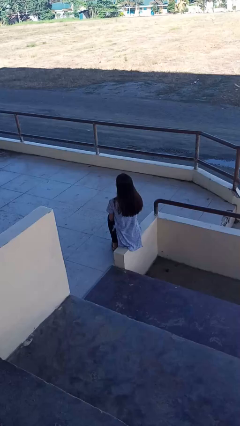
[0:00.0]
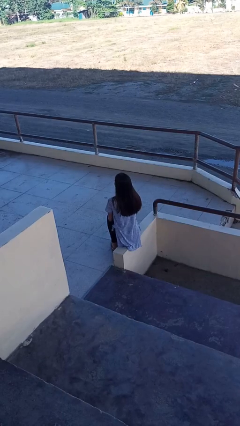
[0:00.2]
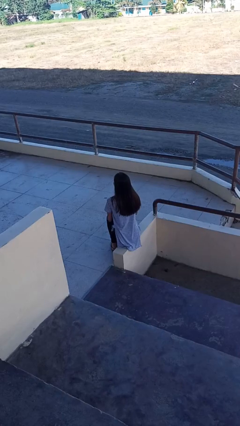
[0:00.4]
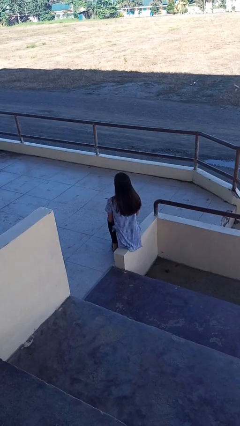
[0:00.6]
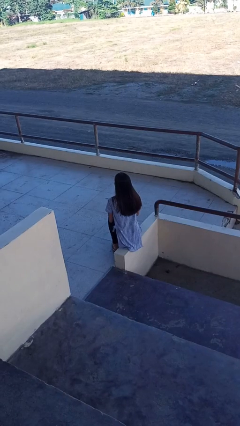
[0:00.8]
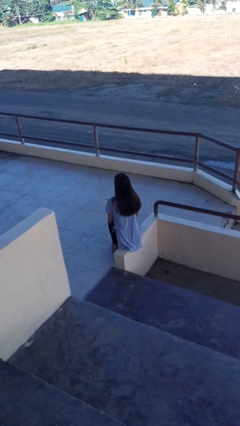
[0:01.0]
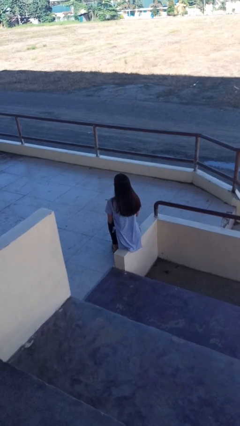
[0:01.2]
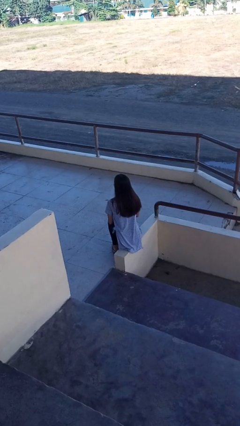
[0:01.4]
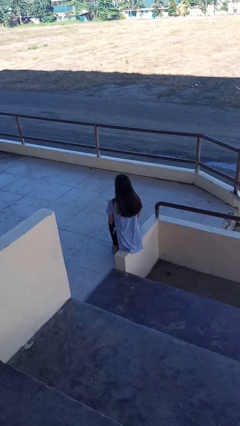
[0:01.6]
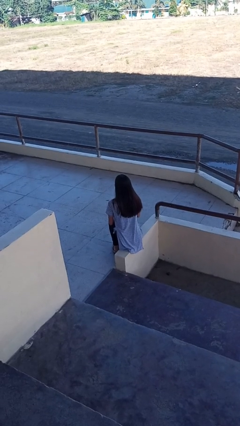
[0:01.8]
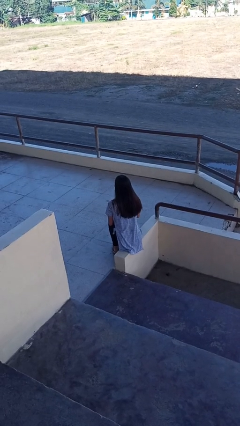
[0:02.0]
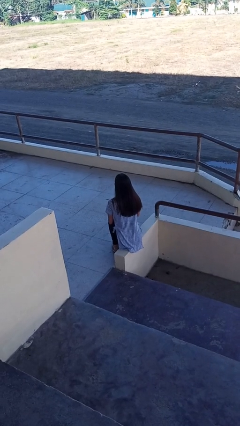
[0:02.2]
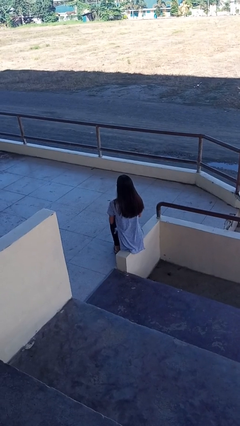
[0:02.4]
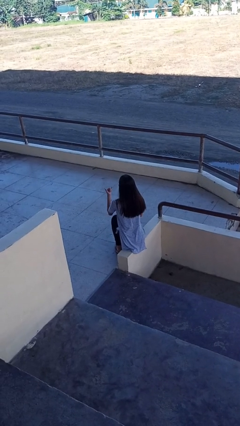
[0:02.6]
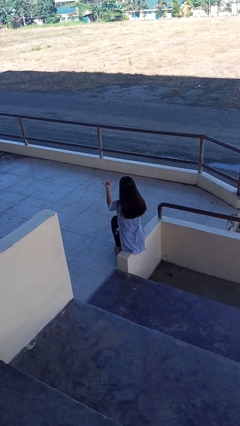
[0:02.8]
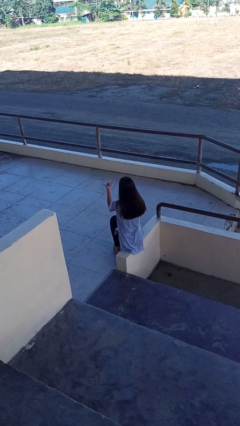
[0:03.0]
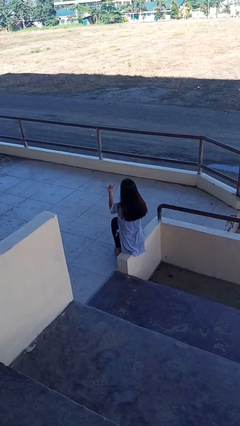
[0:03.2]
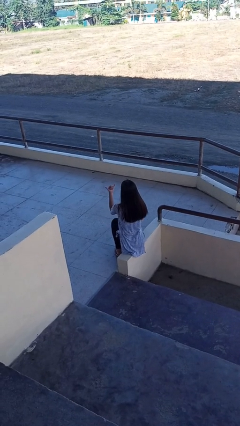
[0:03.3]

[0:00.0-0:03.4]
person gestures hang loose

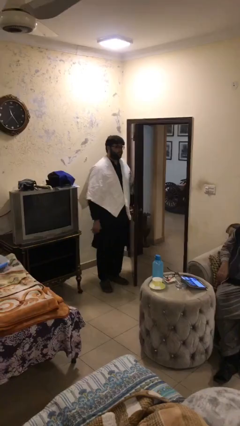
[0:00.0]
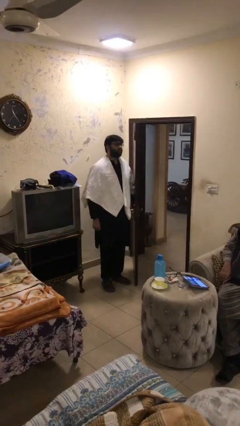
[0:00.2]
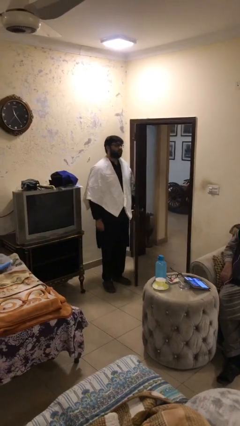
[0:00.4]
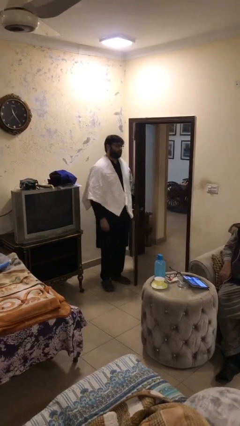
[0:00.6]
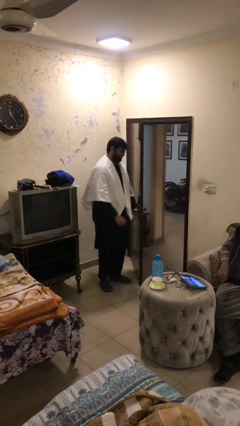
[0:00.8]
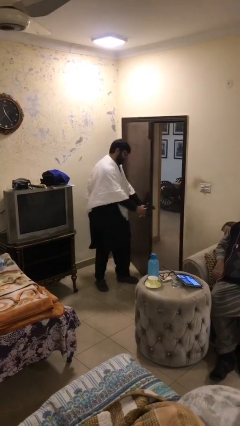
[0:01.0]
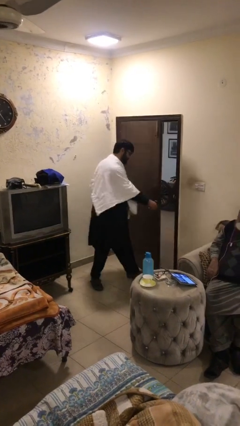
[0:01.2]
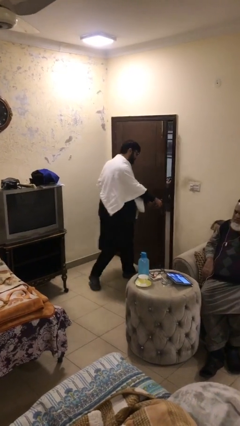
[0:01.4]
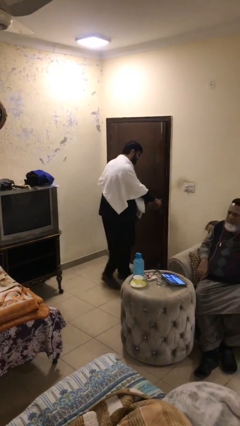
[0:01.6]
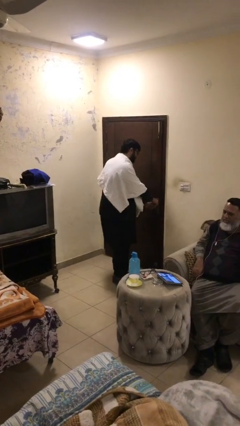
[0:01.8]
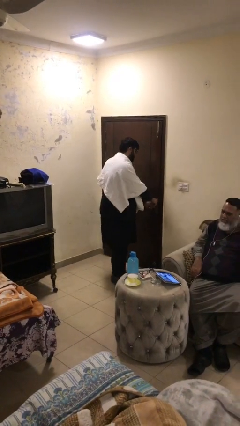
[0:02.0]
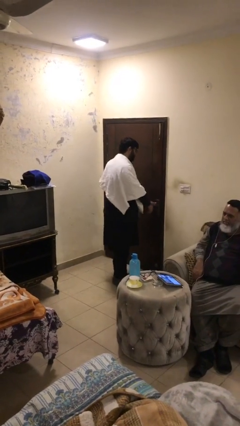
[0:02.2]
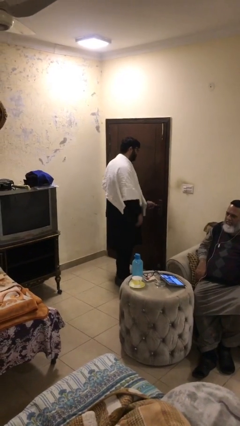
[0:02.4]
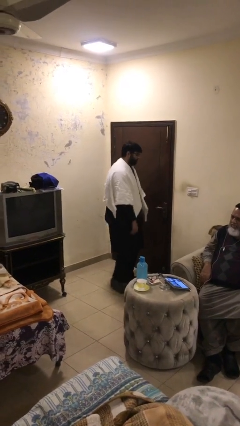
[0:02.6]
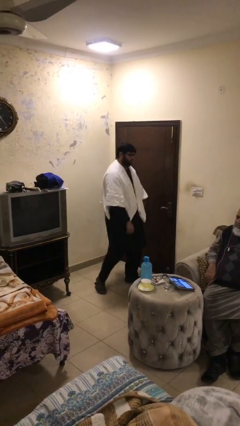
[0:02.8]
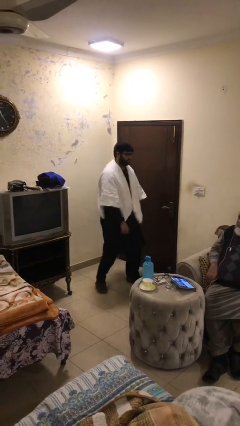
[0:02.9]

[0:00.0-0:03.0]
person closes facility door

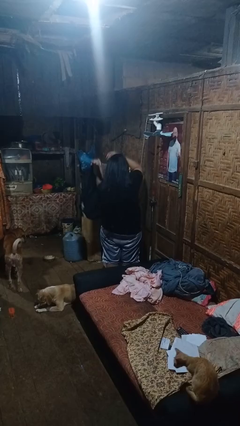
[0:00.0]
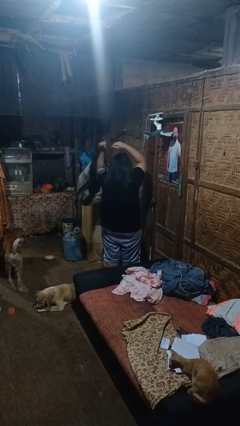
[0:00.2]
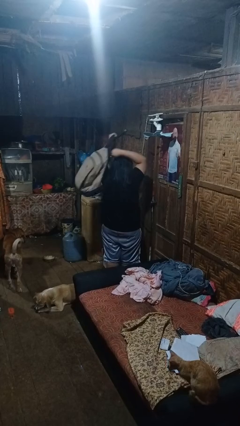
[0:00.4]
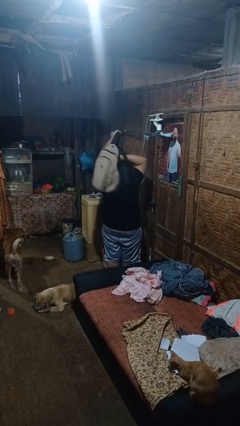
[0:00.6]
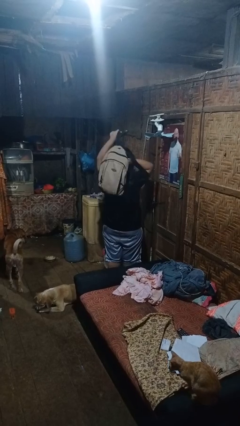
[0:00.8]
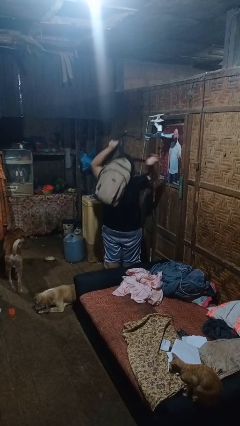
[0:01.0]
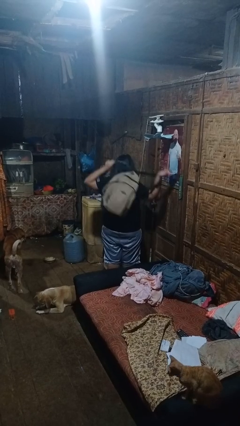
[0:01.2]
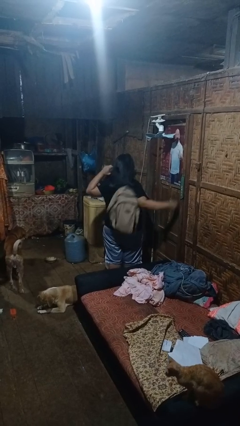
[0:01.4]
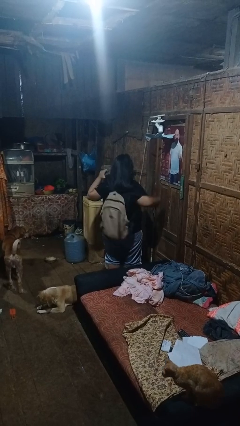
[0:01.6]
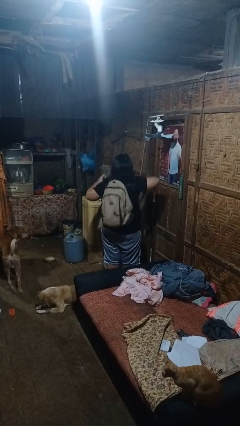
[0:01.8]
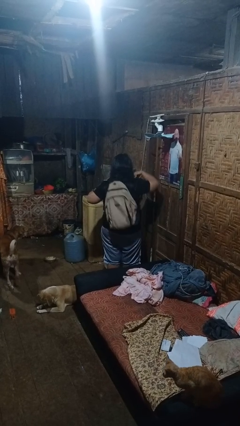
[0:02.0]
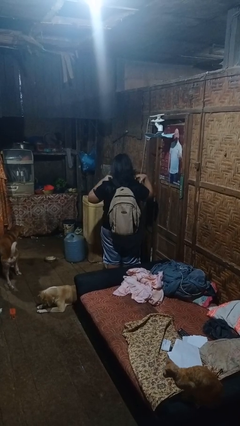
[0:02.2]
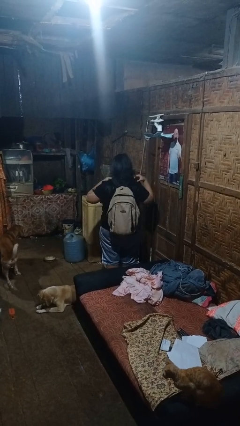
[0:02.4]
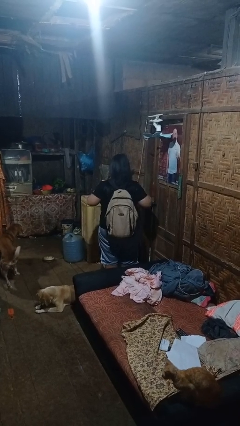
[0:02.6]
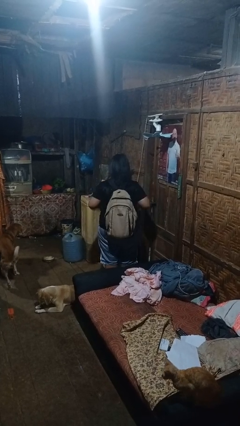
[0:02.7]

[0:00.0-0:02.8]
person puts on backpack

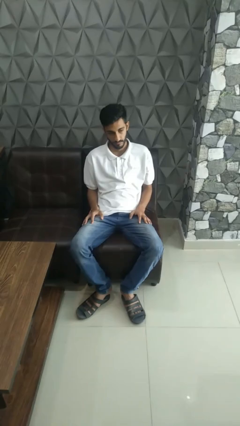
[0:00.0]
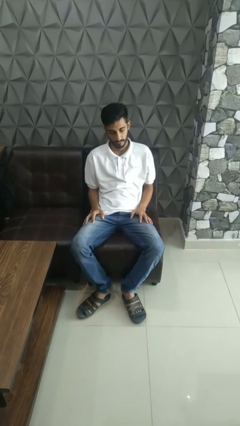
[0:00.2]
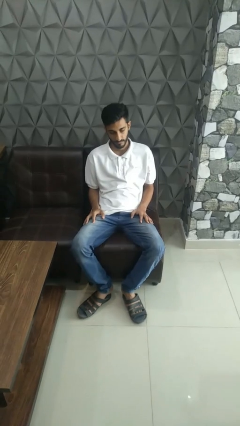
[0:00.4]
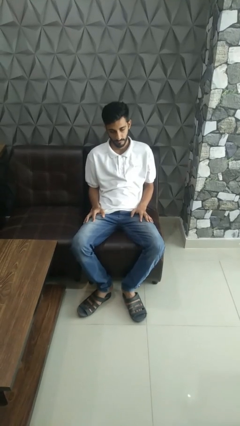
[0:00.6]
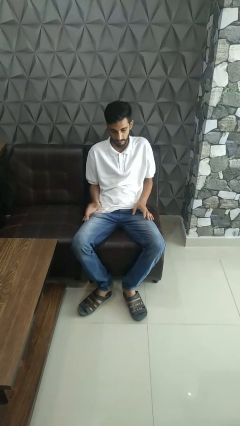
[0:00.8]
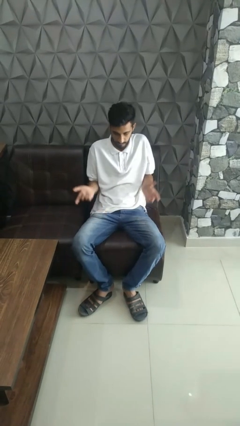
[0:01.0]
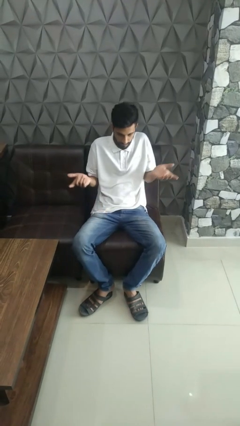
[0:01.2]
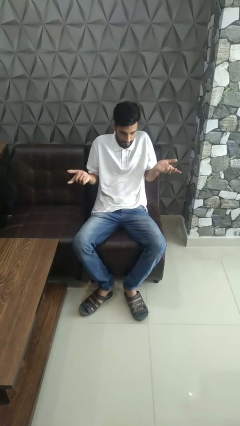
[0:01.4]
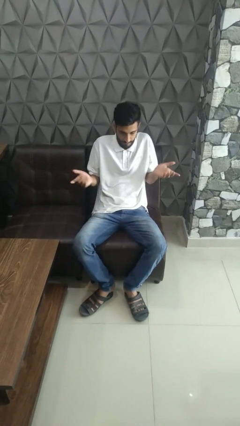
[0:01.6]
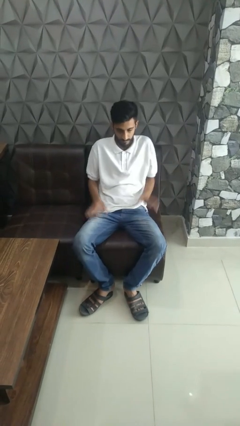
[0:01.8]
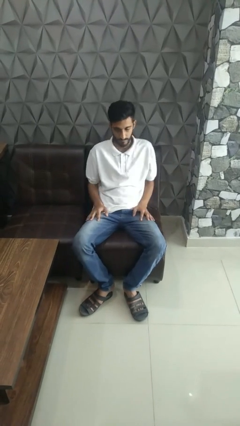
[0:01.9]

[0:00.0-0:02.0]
person shrugs

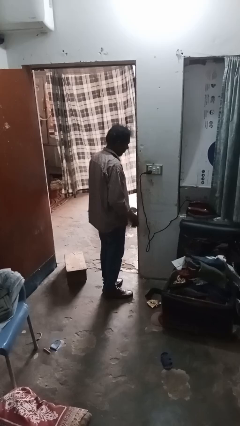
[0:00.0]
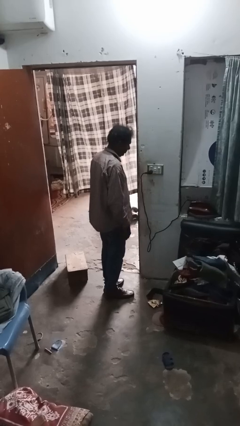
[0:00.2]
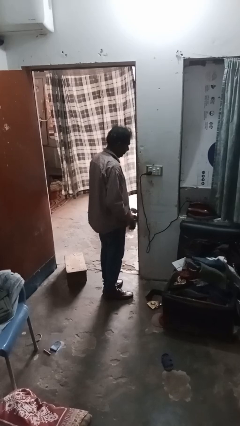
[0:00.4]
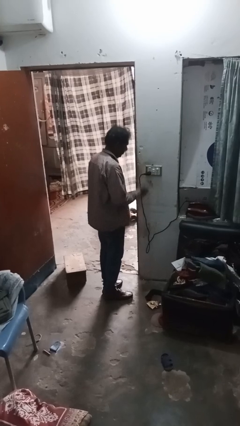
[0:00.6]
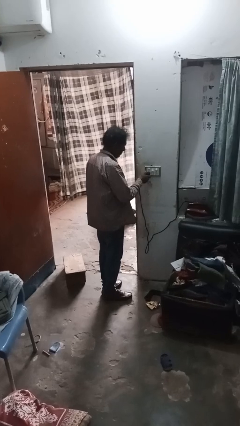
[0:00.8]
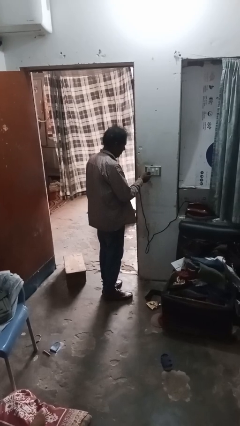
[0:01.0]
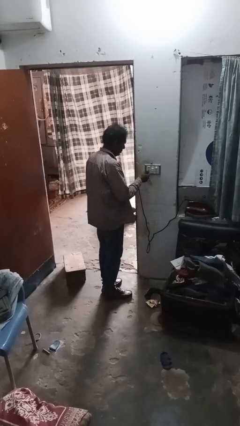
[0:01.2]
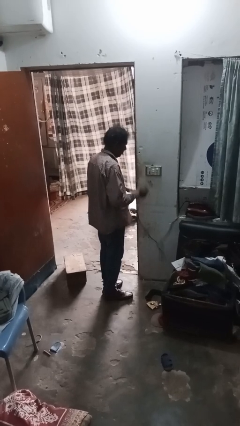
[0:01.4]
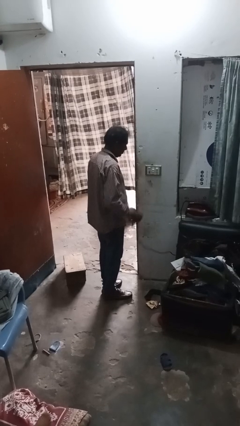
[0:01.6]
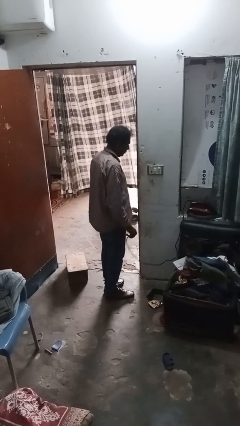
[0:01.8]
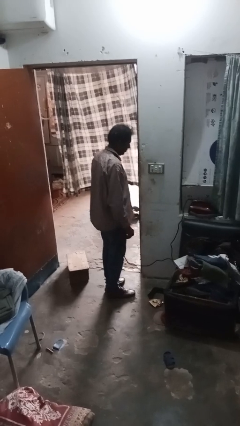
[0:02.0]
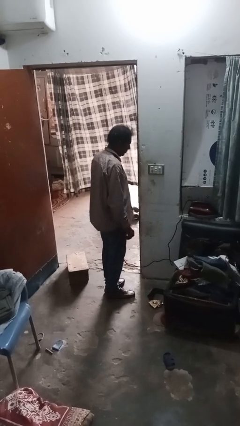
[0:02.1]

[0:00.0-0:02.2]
person unplugs from electrical socket

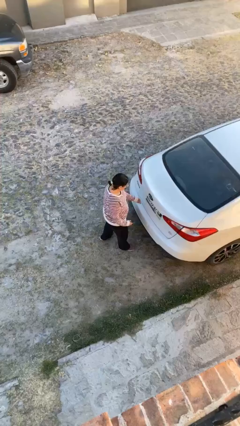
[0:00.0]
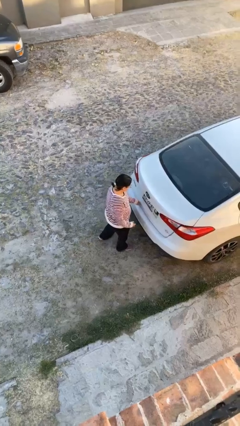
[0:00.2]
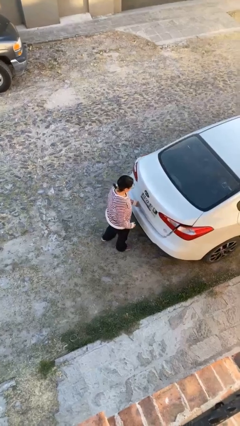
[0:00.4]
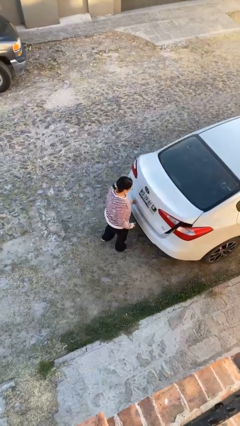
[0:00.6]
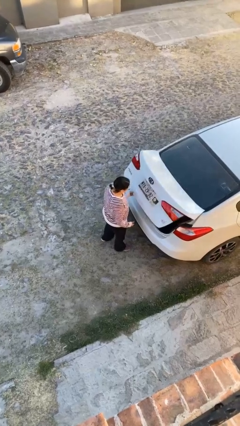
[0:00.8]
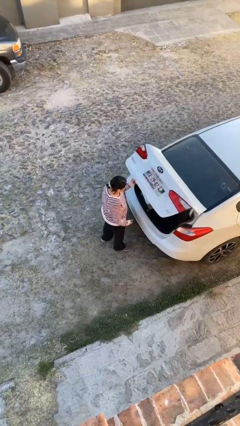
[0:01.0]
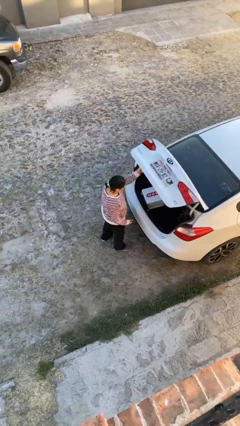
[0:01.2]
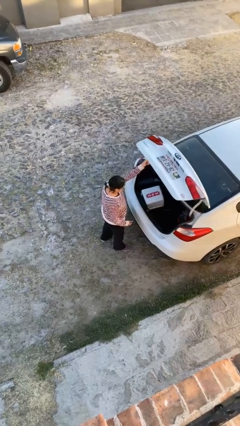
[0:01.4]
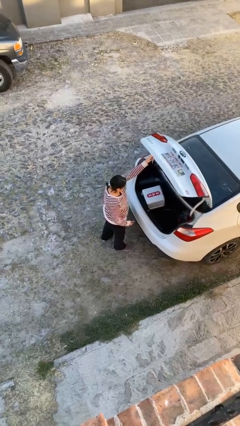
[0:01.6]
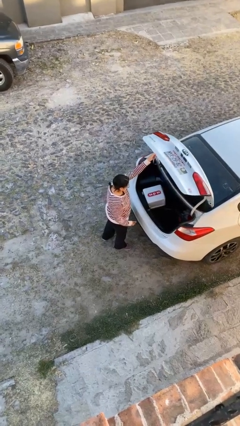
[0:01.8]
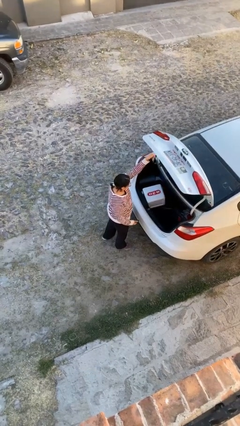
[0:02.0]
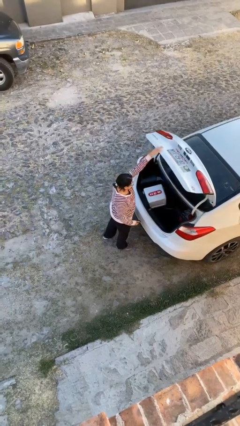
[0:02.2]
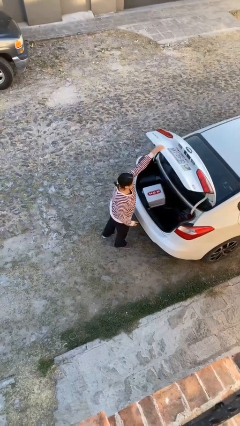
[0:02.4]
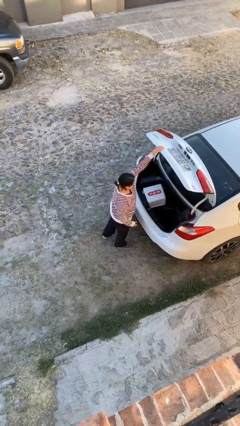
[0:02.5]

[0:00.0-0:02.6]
person opens car trunk

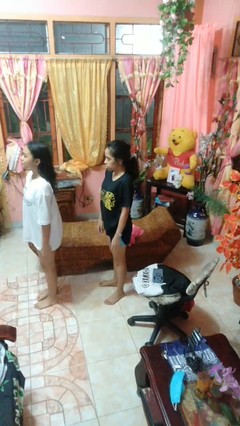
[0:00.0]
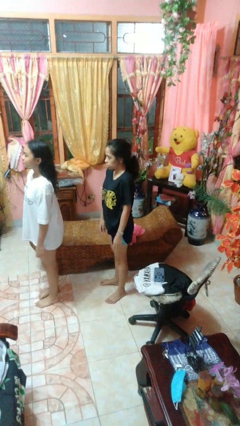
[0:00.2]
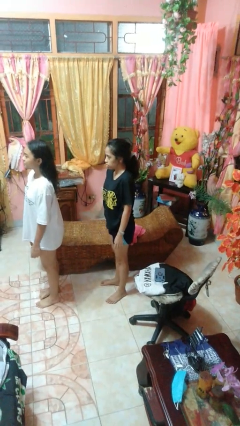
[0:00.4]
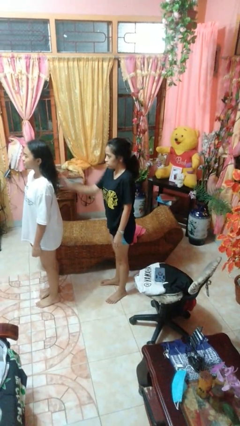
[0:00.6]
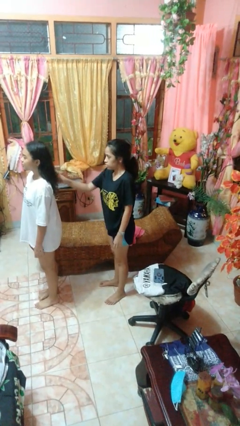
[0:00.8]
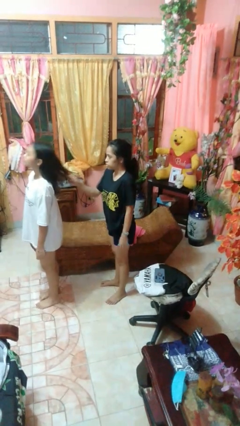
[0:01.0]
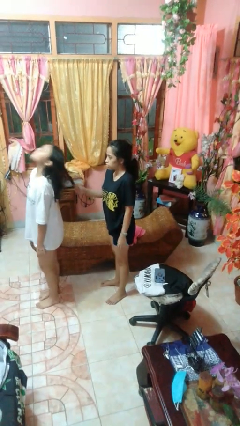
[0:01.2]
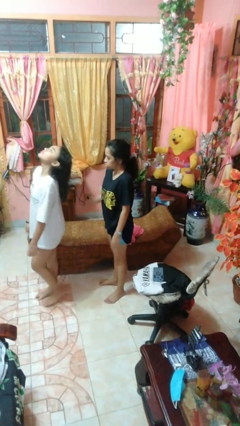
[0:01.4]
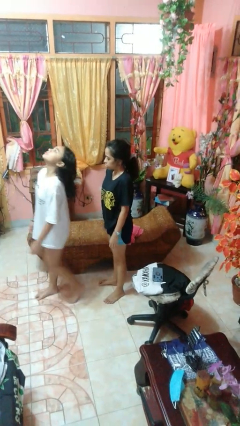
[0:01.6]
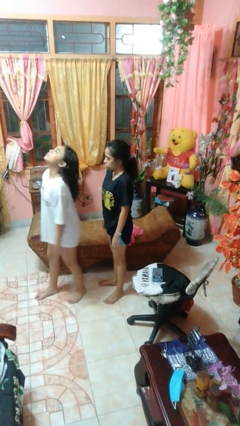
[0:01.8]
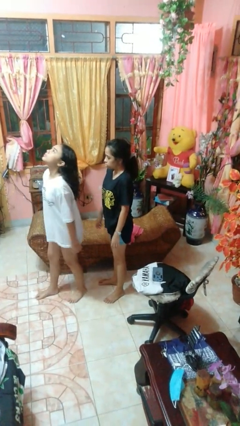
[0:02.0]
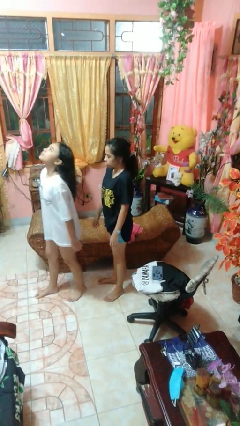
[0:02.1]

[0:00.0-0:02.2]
person grabs person by hair
